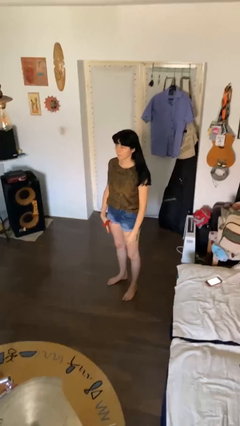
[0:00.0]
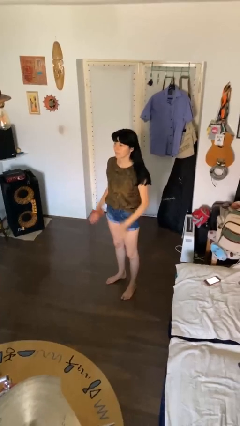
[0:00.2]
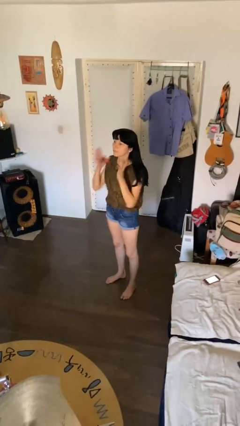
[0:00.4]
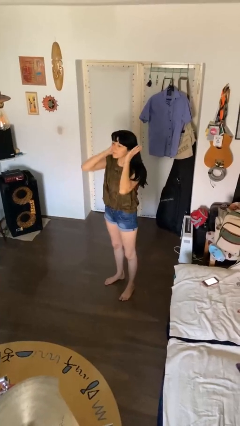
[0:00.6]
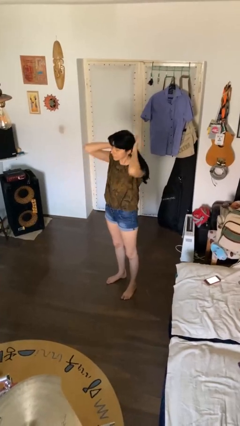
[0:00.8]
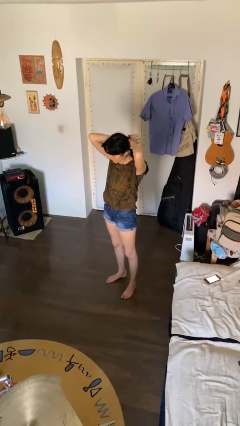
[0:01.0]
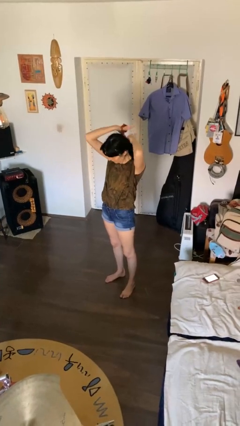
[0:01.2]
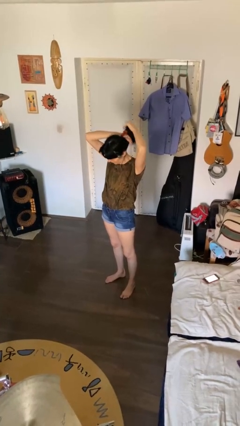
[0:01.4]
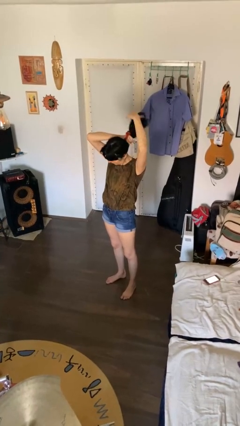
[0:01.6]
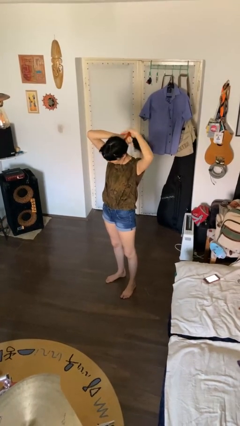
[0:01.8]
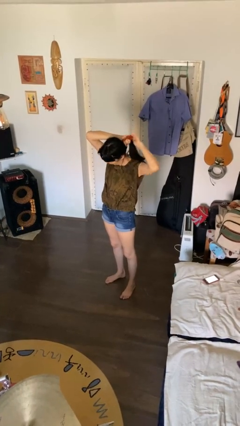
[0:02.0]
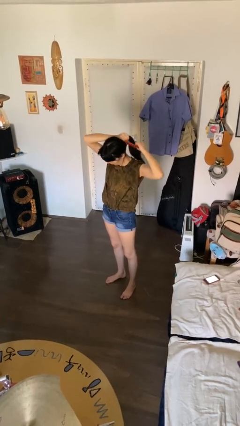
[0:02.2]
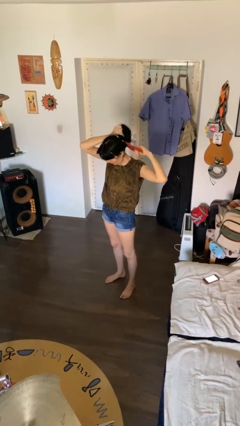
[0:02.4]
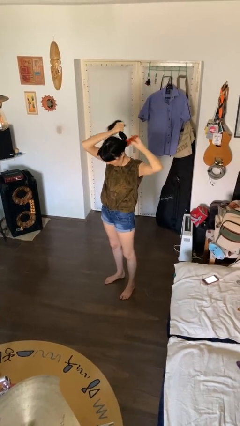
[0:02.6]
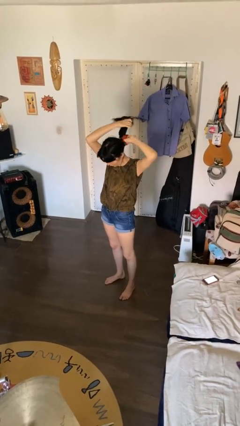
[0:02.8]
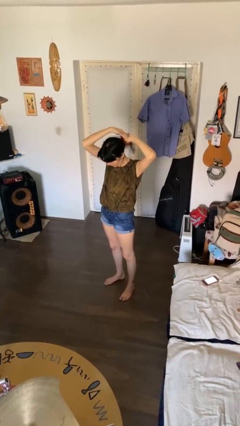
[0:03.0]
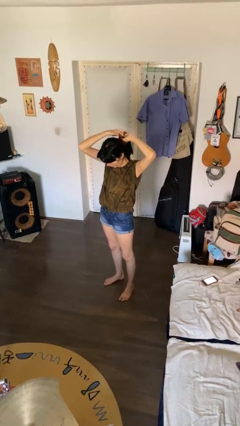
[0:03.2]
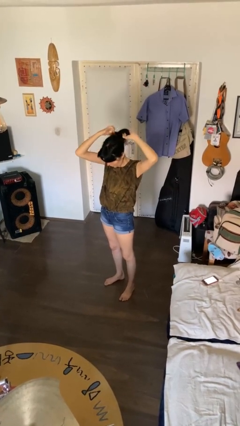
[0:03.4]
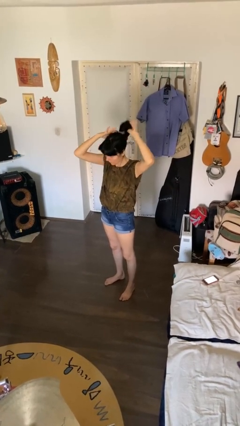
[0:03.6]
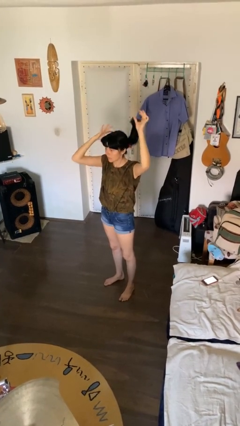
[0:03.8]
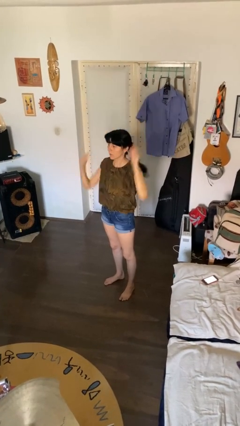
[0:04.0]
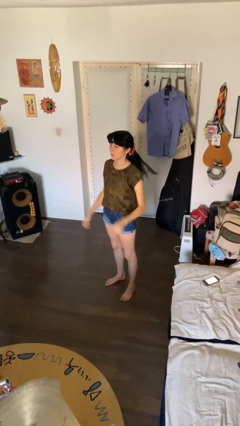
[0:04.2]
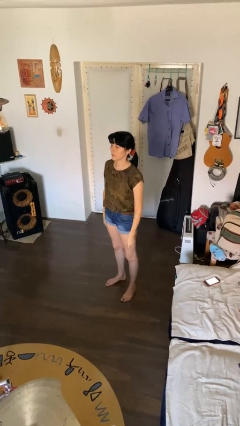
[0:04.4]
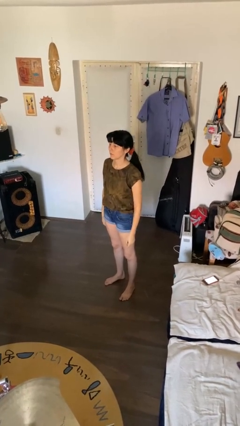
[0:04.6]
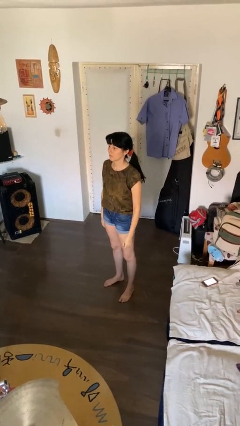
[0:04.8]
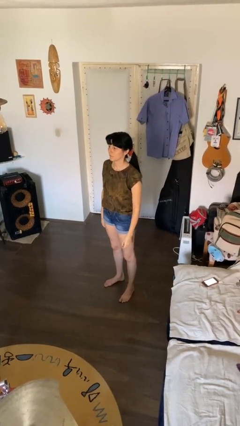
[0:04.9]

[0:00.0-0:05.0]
person puts hair in ponytail

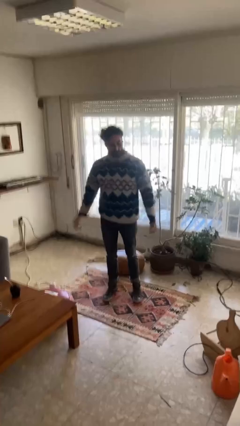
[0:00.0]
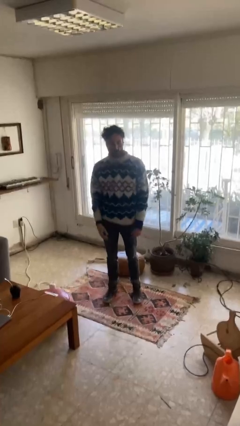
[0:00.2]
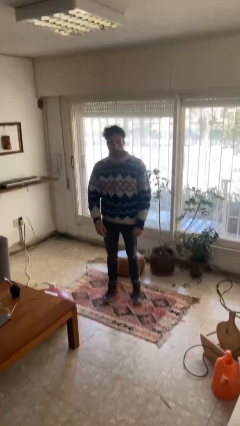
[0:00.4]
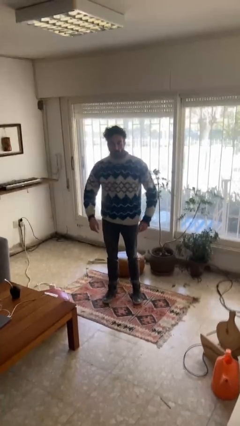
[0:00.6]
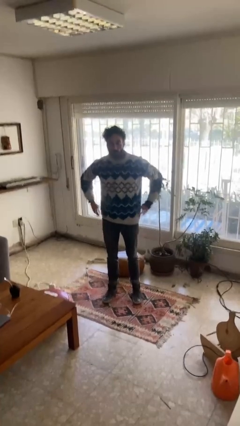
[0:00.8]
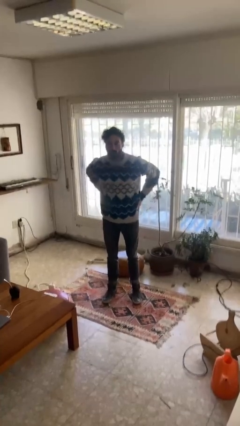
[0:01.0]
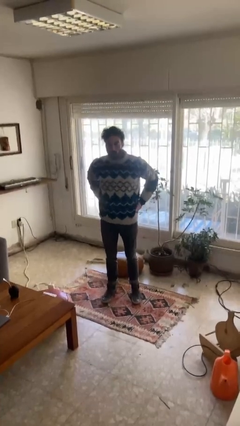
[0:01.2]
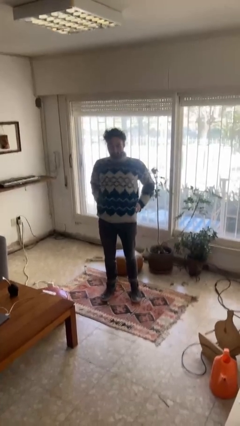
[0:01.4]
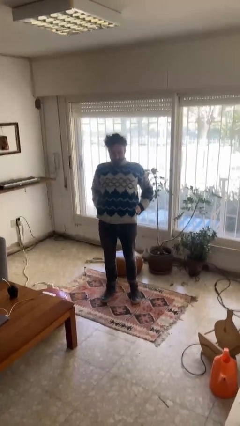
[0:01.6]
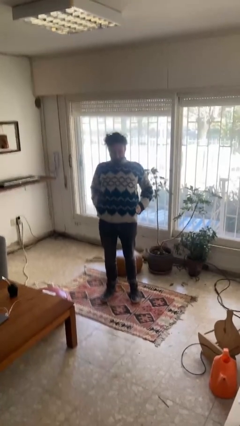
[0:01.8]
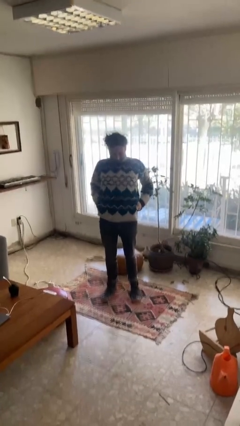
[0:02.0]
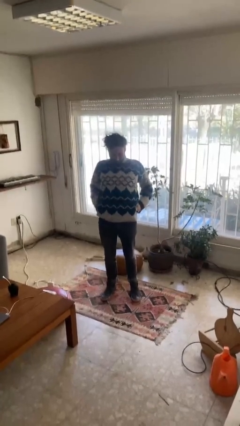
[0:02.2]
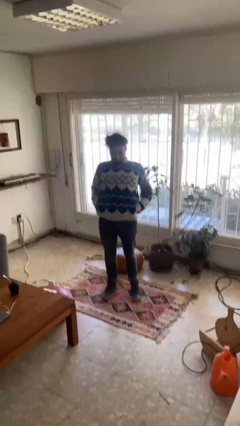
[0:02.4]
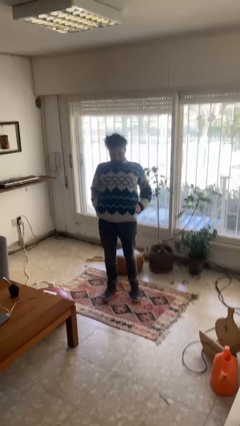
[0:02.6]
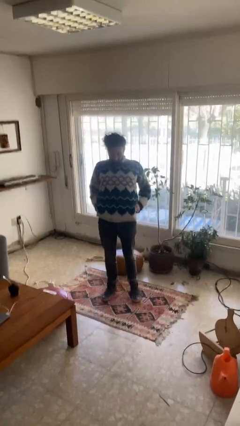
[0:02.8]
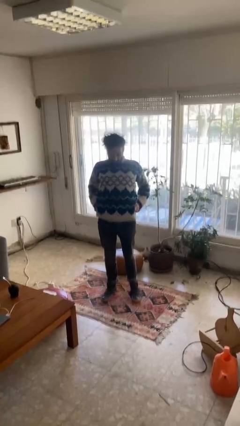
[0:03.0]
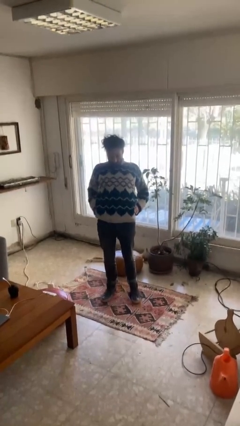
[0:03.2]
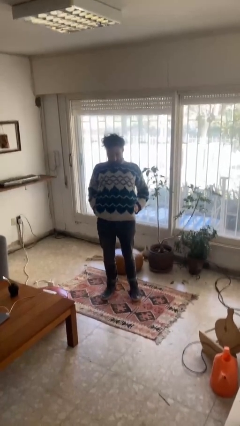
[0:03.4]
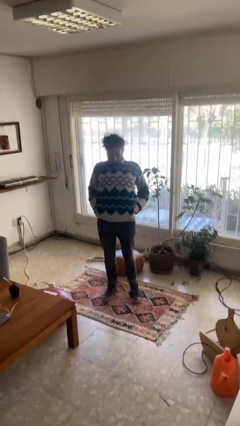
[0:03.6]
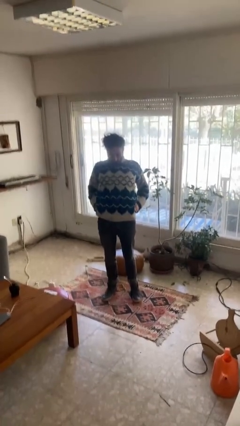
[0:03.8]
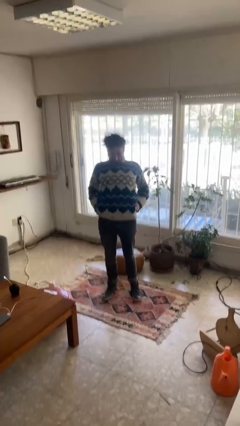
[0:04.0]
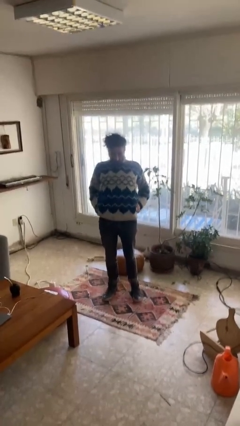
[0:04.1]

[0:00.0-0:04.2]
person stretches back

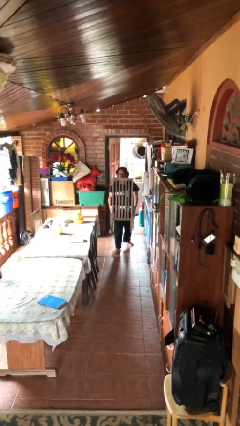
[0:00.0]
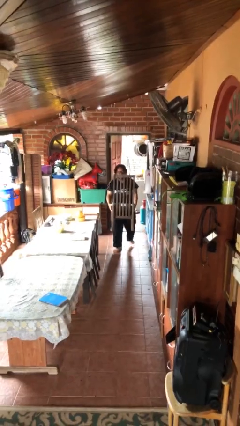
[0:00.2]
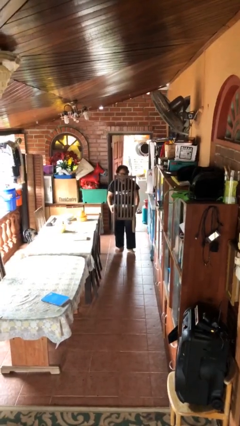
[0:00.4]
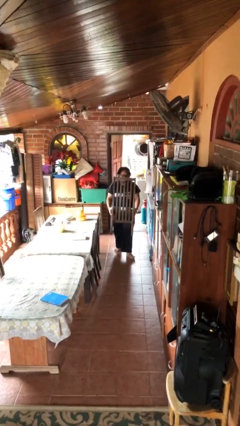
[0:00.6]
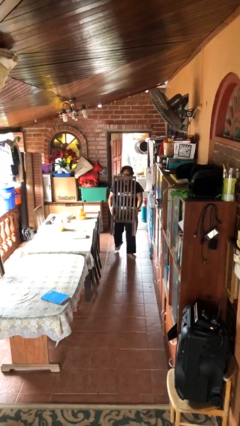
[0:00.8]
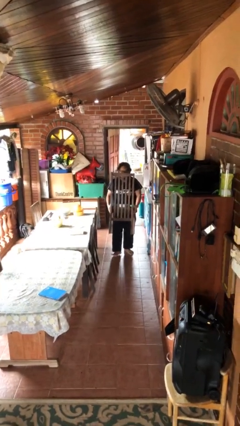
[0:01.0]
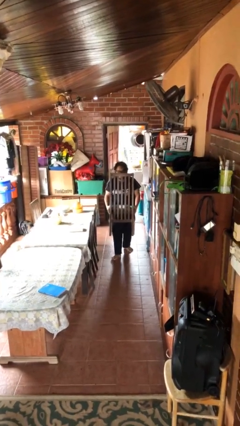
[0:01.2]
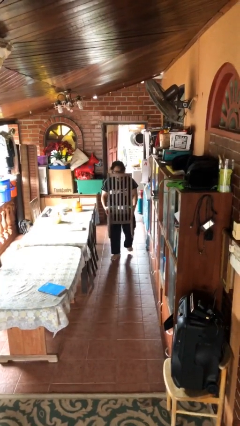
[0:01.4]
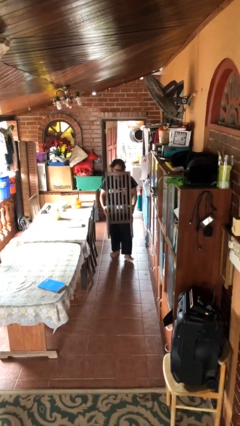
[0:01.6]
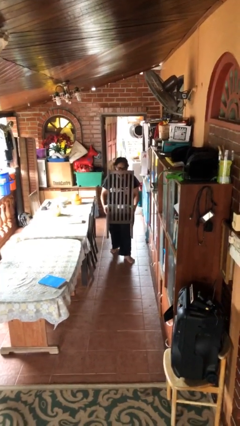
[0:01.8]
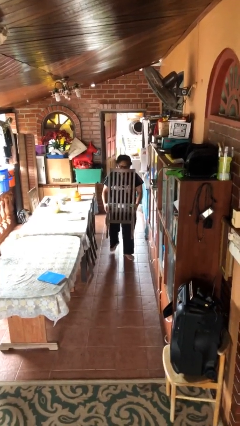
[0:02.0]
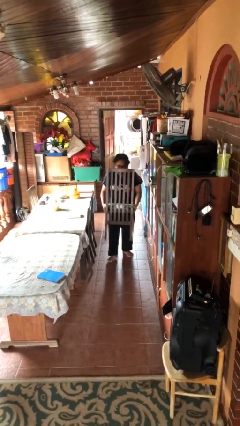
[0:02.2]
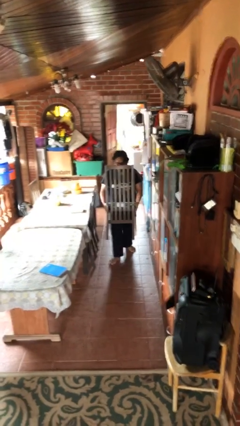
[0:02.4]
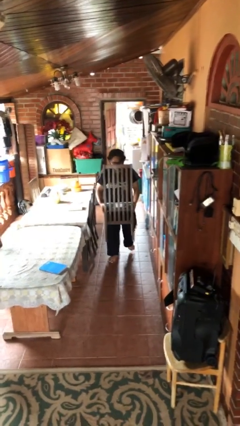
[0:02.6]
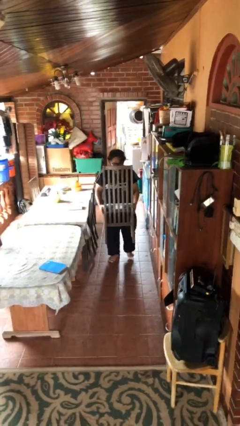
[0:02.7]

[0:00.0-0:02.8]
person carries heavy object

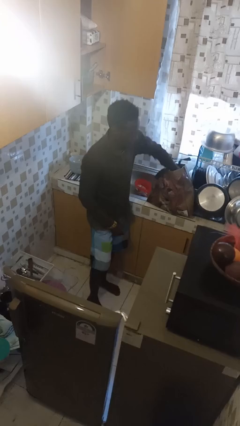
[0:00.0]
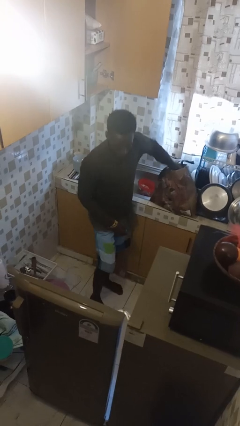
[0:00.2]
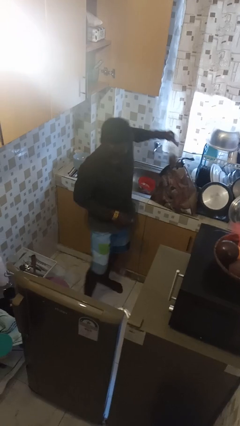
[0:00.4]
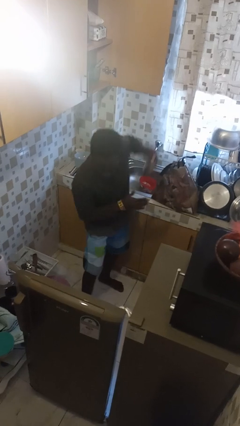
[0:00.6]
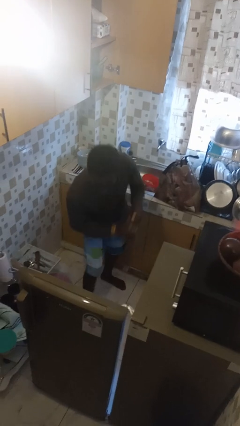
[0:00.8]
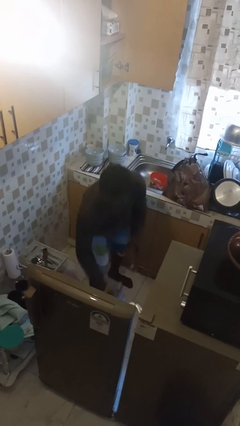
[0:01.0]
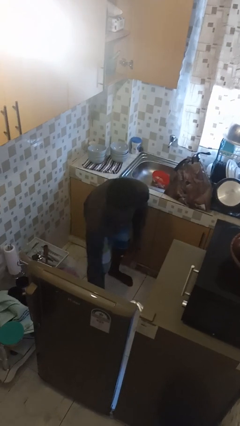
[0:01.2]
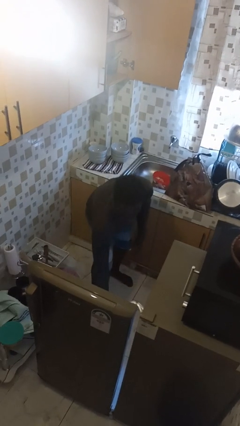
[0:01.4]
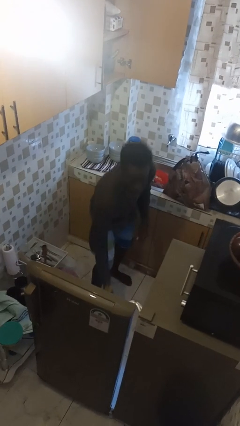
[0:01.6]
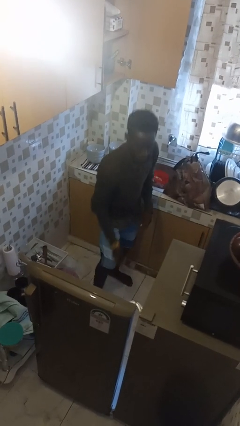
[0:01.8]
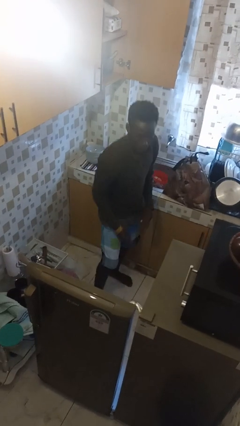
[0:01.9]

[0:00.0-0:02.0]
person loads groceries into refrigerator

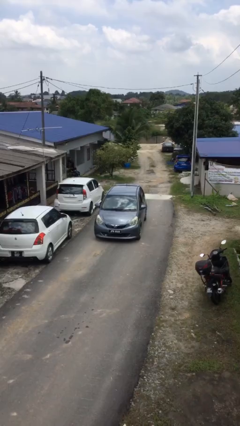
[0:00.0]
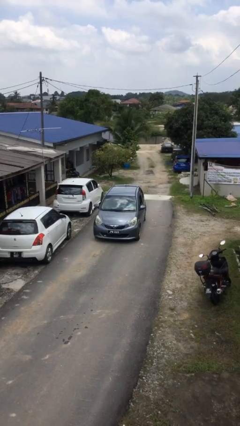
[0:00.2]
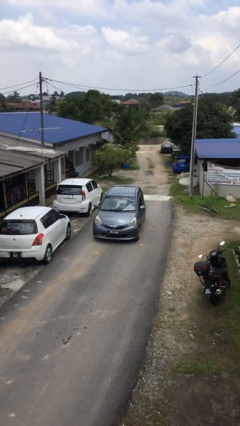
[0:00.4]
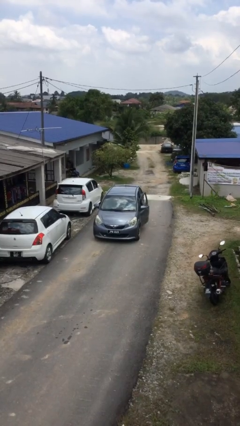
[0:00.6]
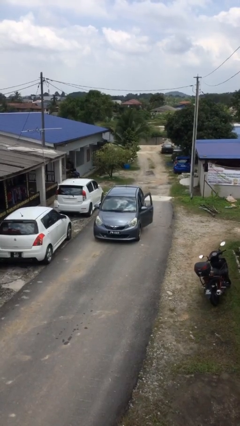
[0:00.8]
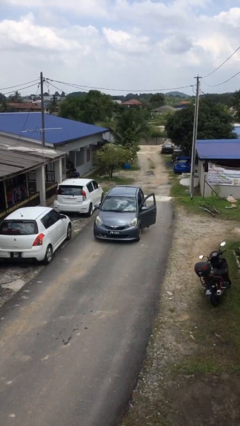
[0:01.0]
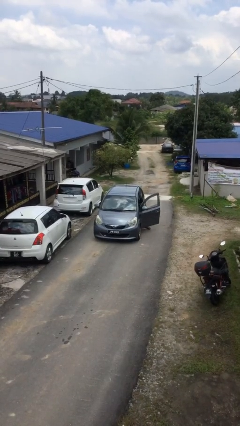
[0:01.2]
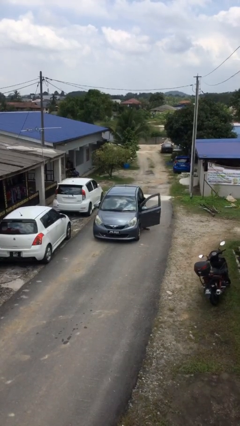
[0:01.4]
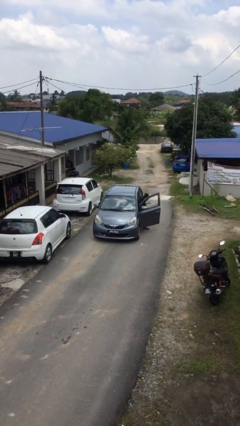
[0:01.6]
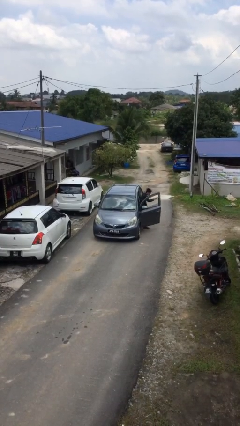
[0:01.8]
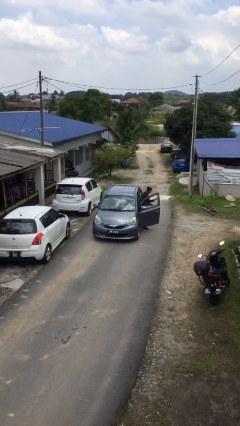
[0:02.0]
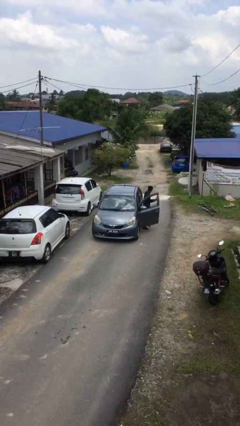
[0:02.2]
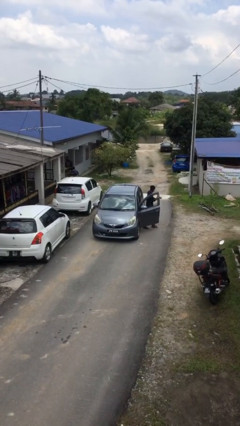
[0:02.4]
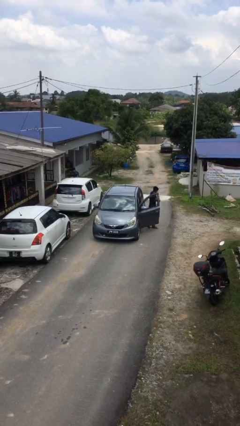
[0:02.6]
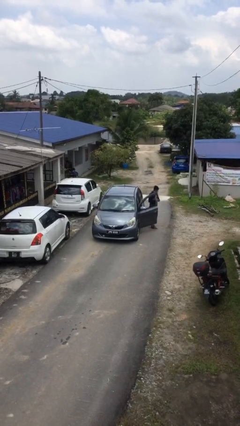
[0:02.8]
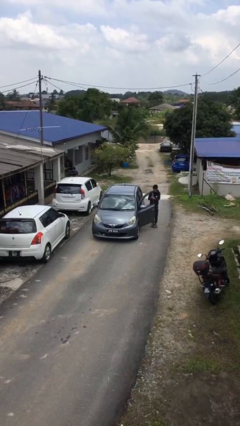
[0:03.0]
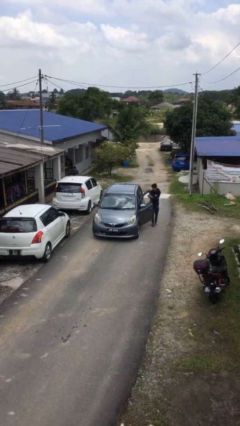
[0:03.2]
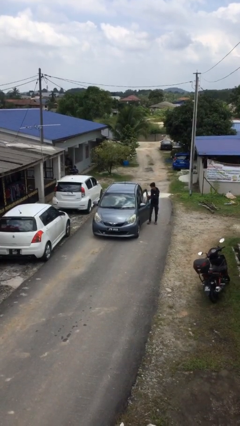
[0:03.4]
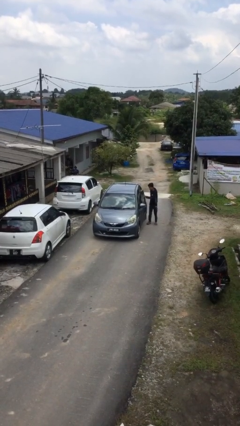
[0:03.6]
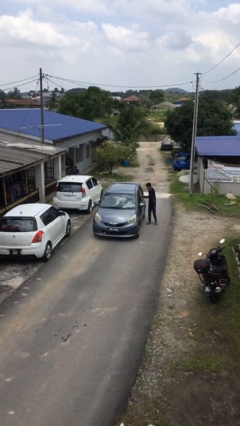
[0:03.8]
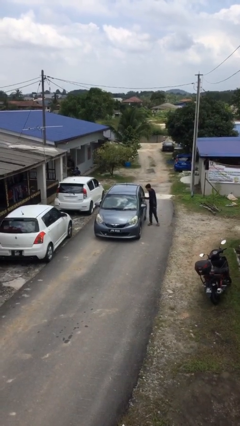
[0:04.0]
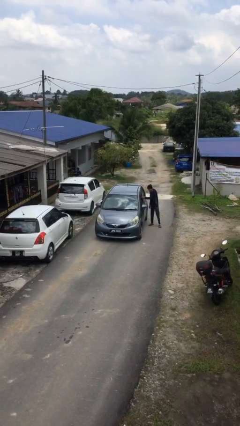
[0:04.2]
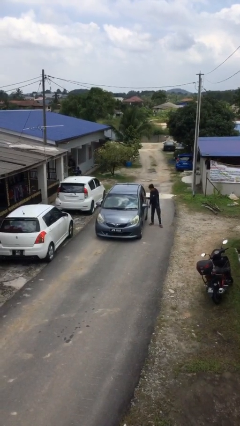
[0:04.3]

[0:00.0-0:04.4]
car drops off person
